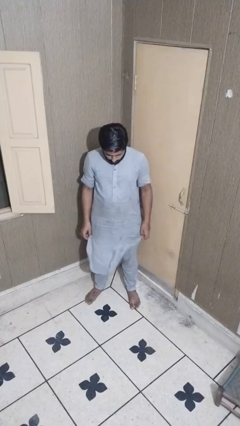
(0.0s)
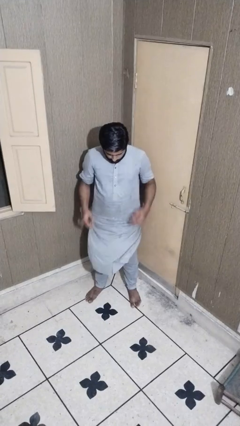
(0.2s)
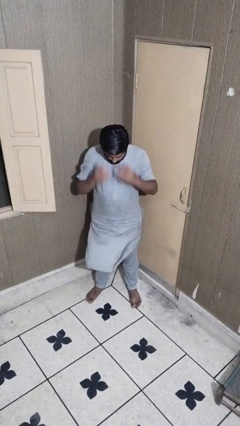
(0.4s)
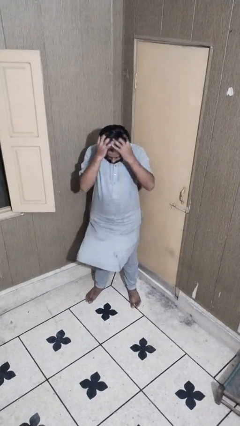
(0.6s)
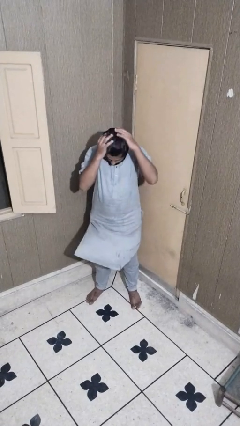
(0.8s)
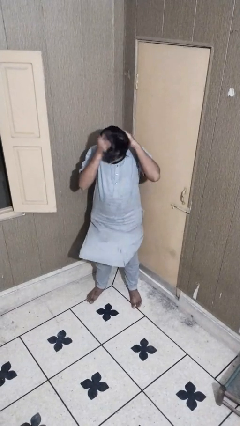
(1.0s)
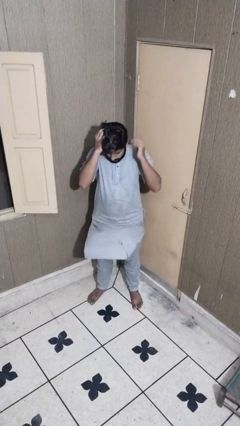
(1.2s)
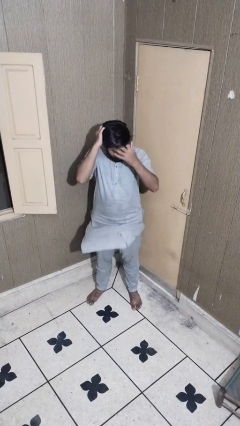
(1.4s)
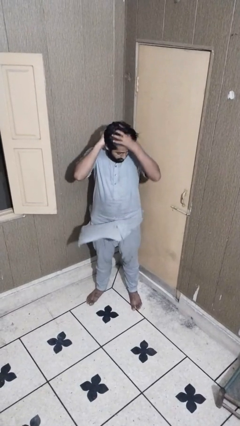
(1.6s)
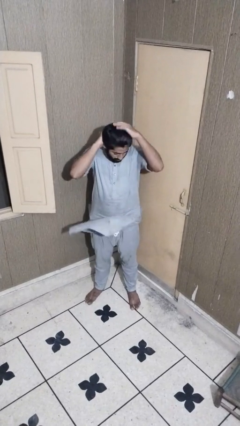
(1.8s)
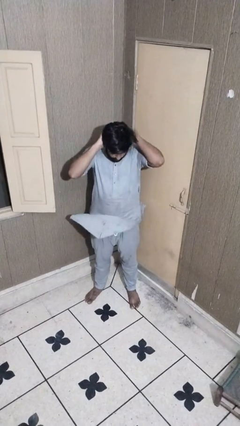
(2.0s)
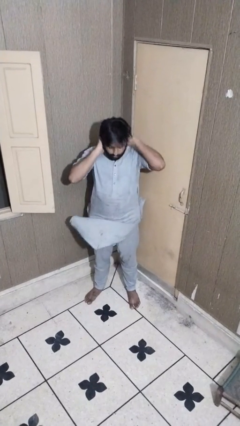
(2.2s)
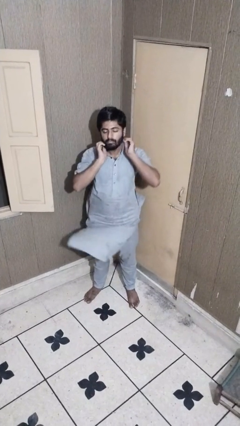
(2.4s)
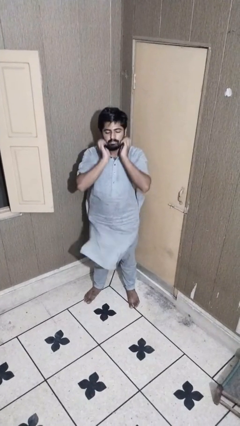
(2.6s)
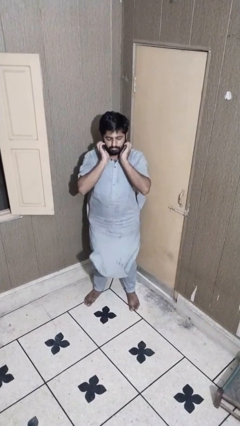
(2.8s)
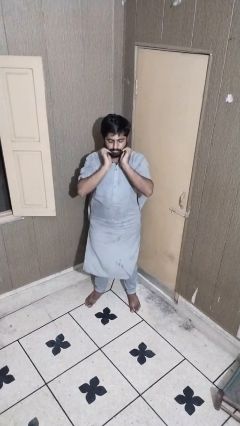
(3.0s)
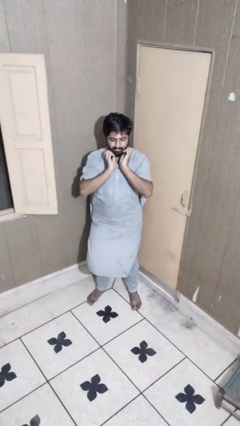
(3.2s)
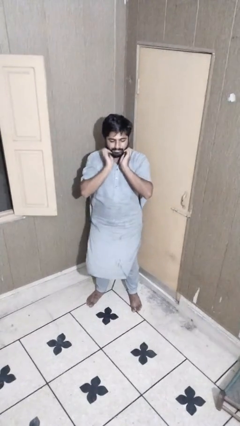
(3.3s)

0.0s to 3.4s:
person scratches face

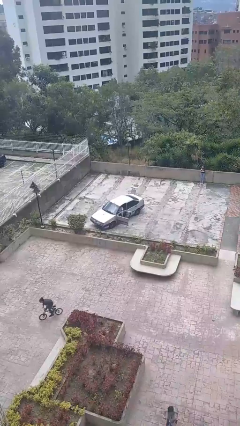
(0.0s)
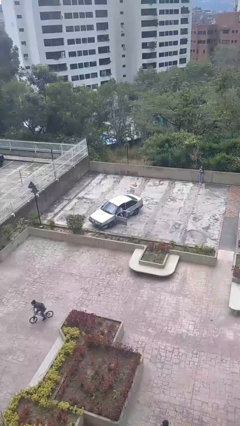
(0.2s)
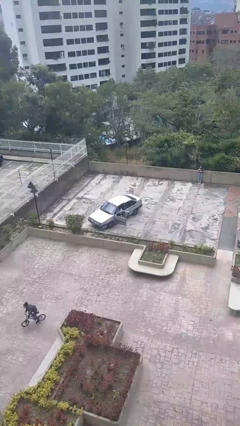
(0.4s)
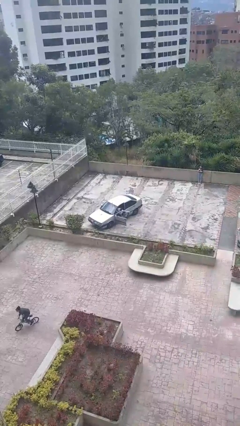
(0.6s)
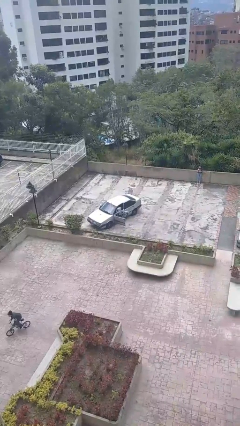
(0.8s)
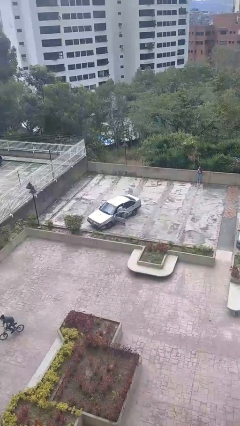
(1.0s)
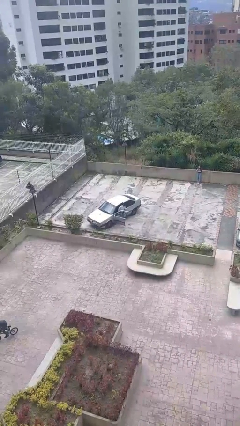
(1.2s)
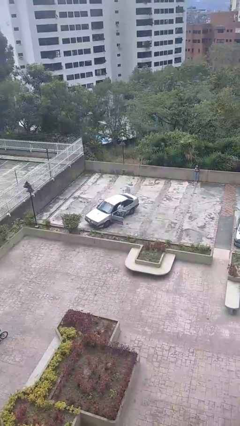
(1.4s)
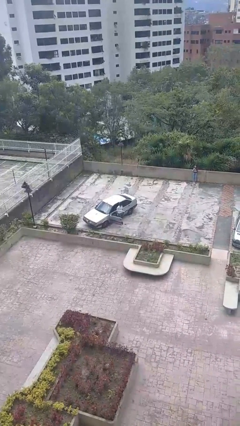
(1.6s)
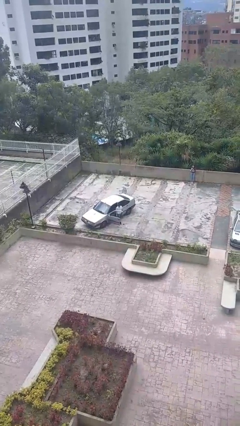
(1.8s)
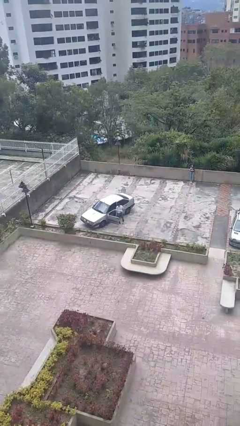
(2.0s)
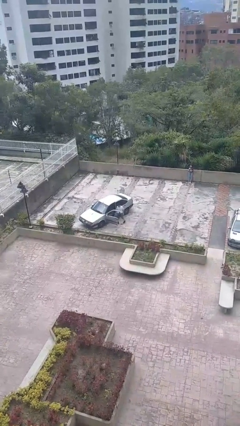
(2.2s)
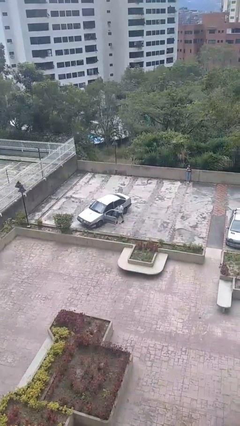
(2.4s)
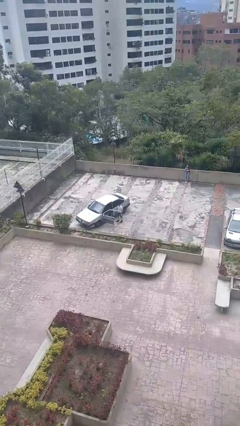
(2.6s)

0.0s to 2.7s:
person exits car

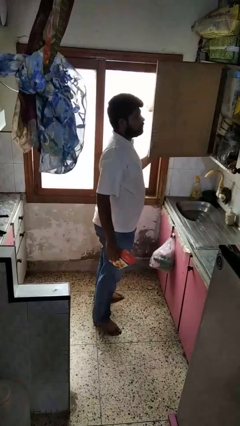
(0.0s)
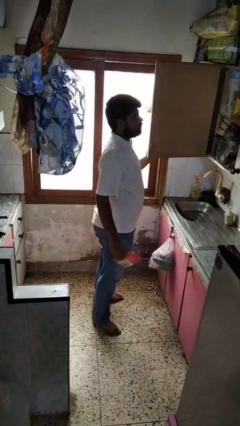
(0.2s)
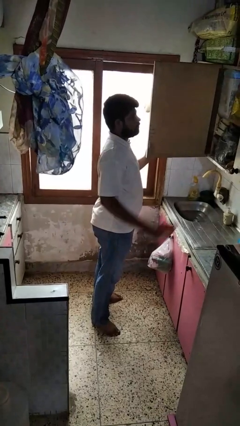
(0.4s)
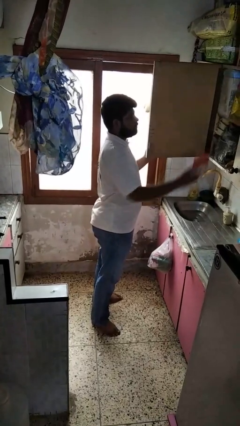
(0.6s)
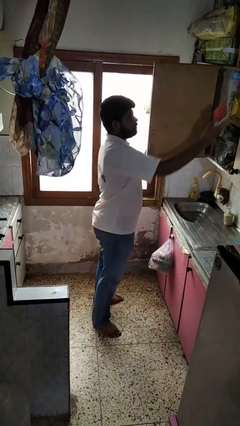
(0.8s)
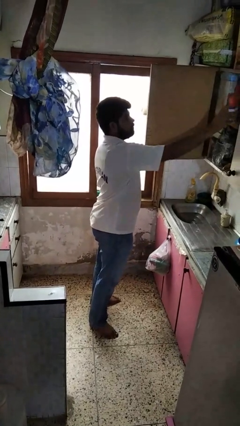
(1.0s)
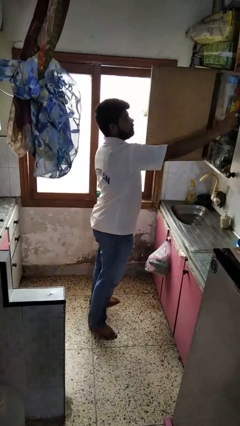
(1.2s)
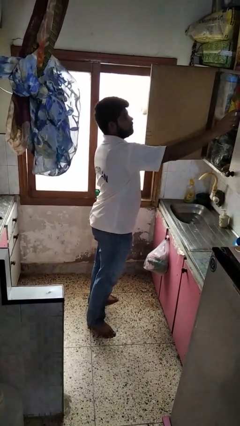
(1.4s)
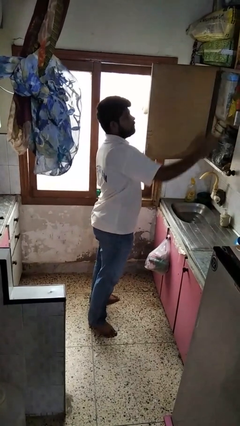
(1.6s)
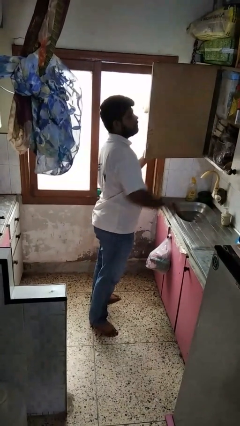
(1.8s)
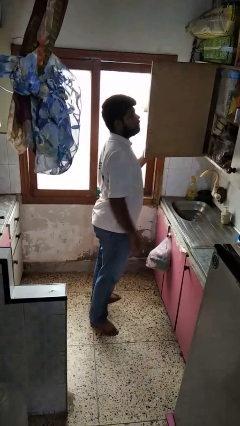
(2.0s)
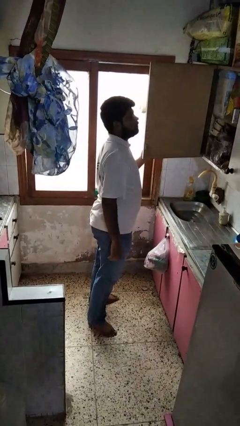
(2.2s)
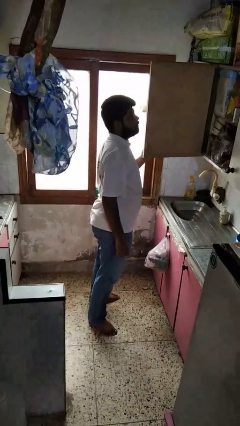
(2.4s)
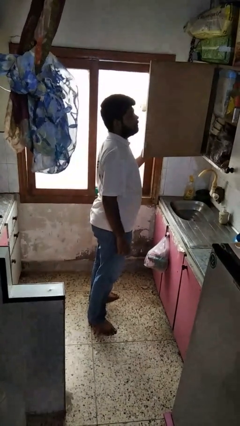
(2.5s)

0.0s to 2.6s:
person puts down object into cabinet

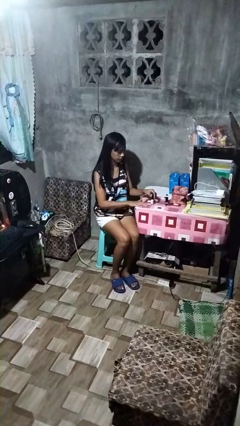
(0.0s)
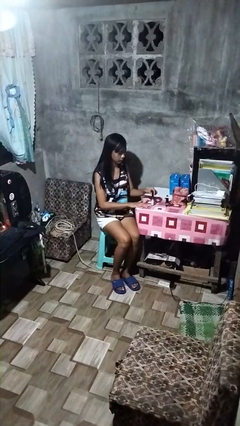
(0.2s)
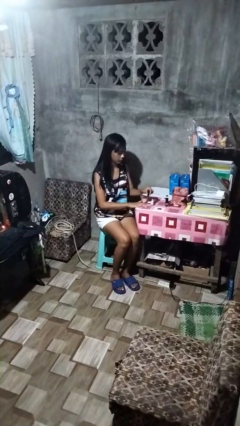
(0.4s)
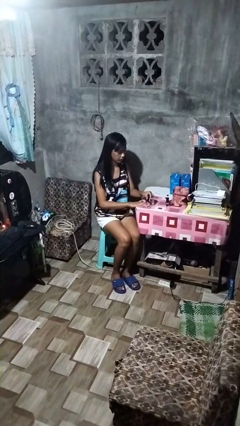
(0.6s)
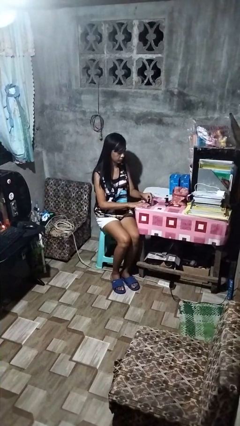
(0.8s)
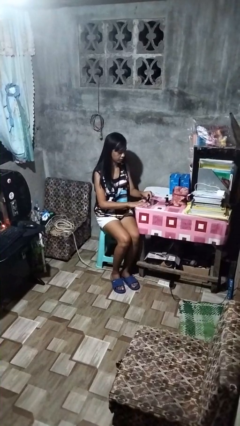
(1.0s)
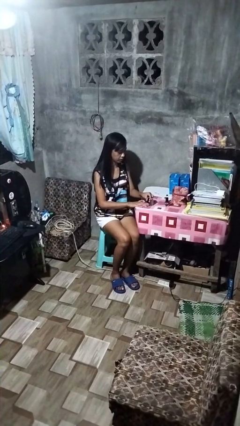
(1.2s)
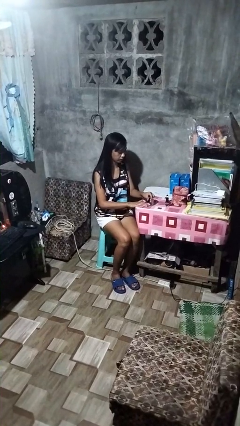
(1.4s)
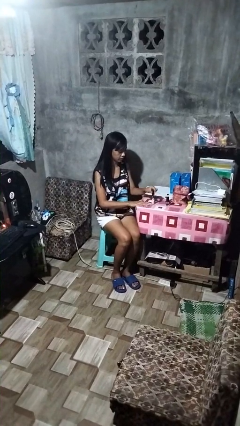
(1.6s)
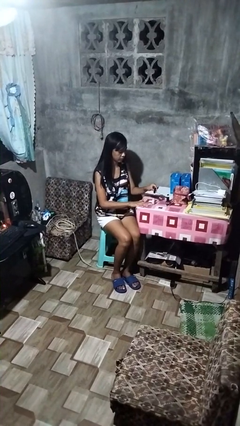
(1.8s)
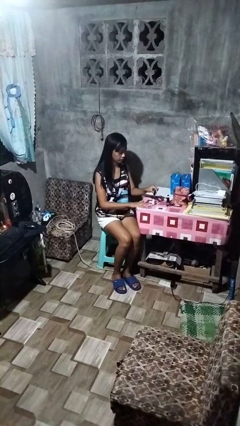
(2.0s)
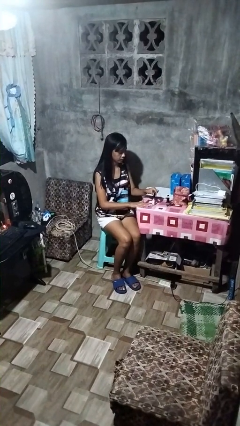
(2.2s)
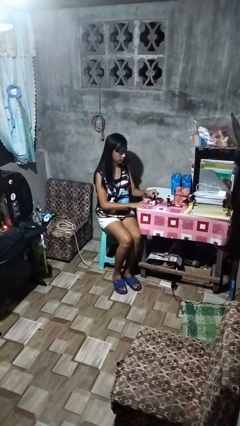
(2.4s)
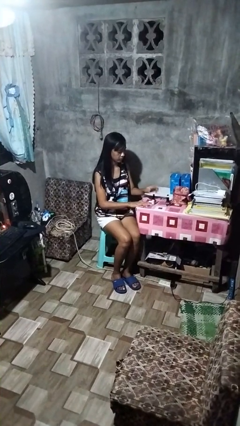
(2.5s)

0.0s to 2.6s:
person paints fingernails

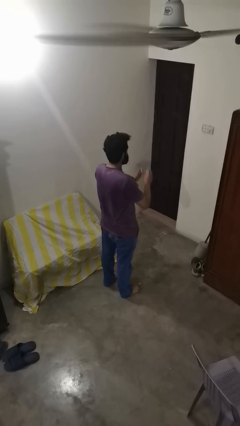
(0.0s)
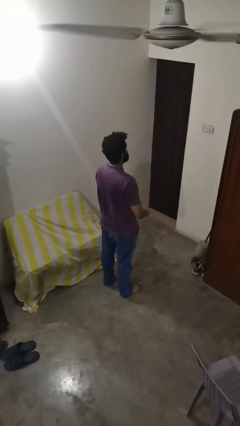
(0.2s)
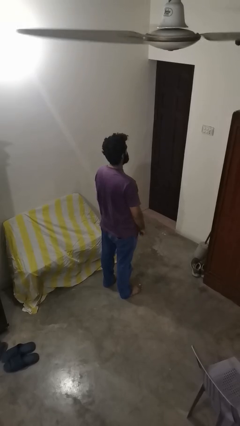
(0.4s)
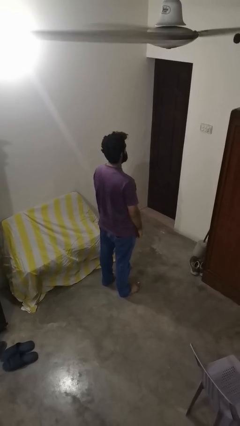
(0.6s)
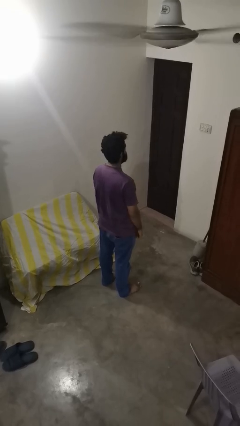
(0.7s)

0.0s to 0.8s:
person takes off glasses

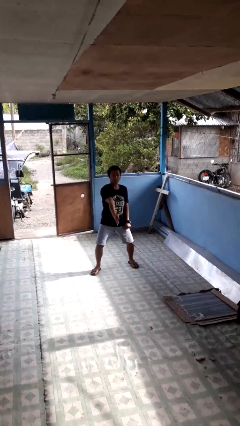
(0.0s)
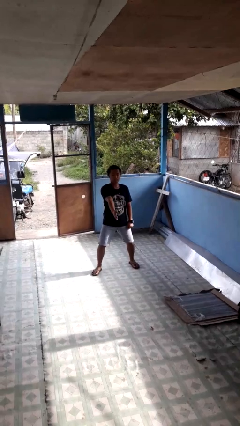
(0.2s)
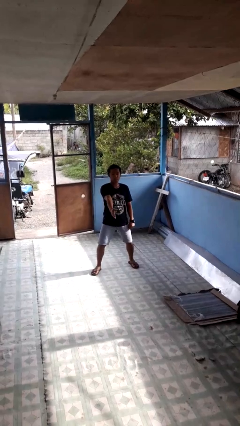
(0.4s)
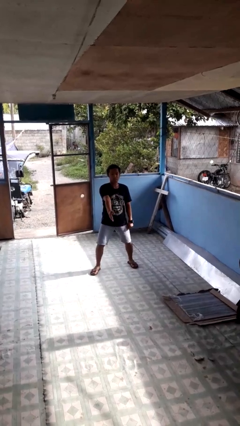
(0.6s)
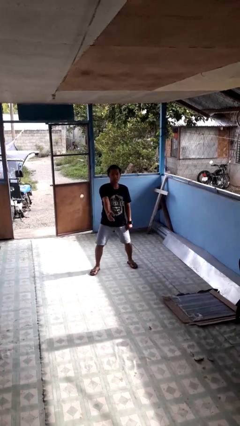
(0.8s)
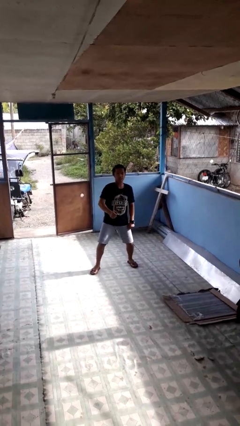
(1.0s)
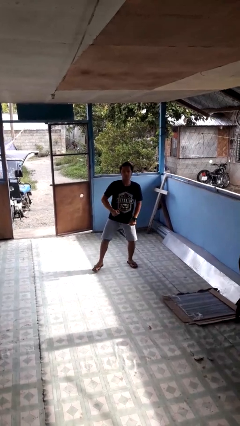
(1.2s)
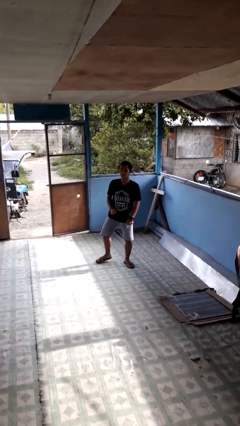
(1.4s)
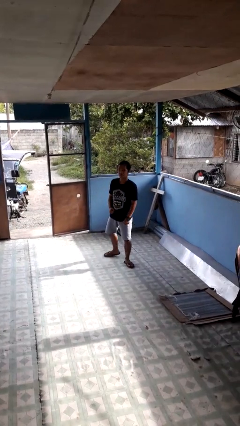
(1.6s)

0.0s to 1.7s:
person karate chop

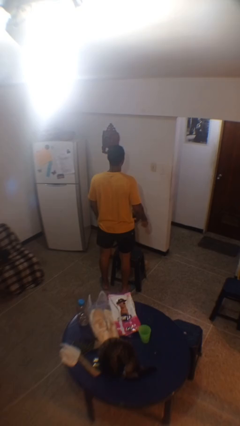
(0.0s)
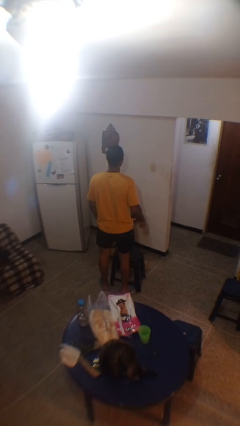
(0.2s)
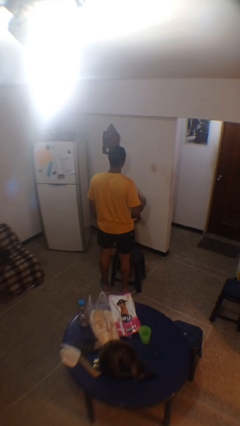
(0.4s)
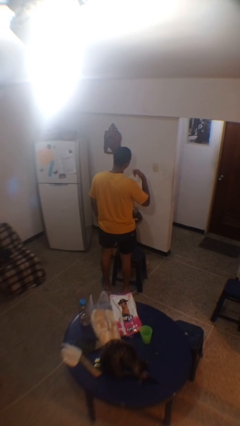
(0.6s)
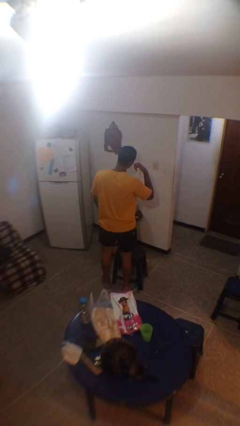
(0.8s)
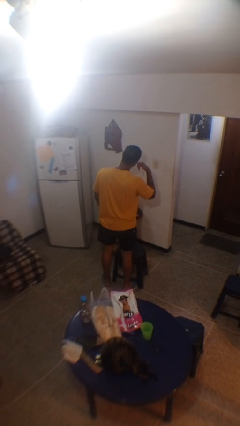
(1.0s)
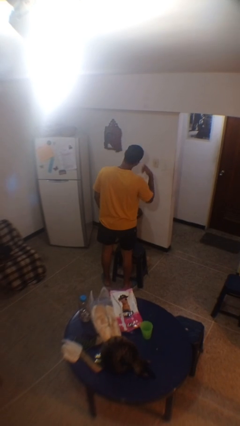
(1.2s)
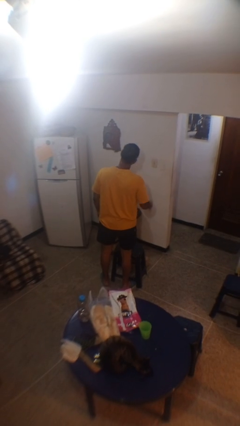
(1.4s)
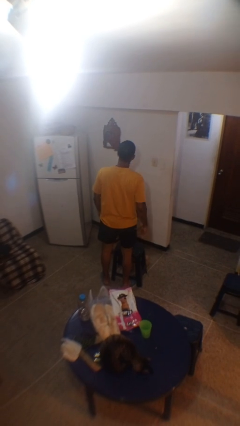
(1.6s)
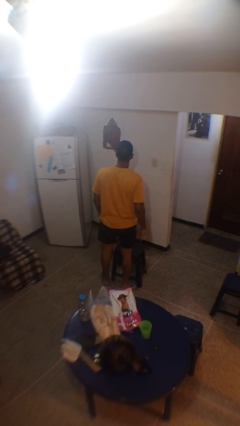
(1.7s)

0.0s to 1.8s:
person gestures call me

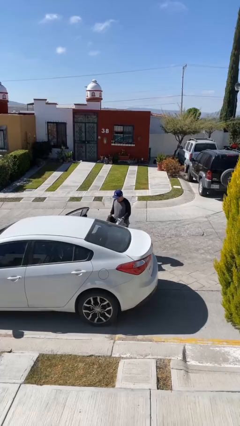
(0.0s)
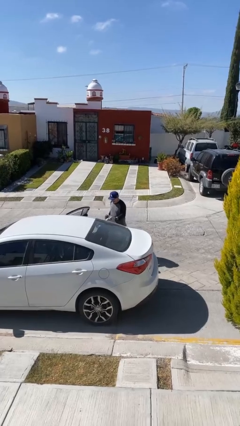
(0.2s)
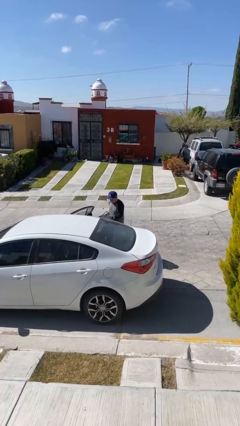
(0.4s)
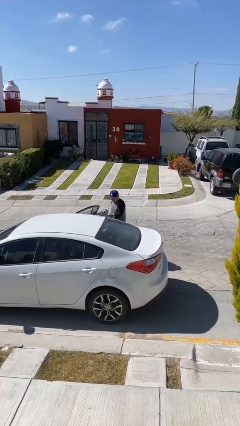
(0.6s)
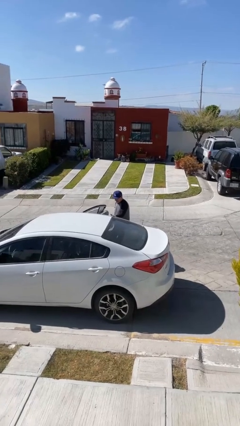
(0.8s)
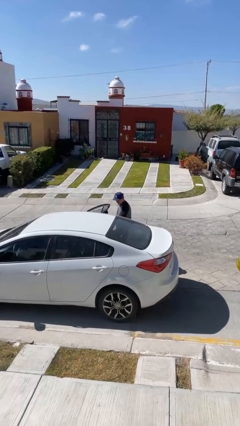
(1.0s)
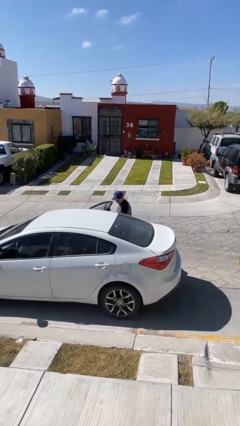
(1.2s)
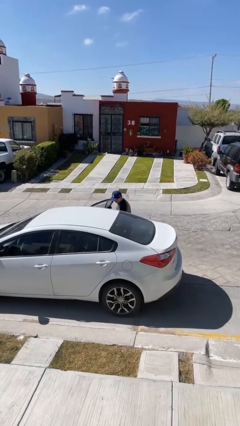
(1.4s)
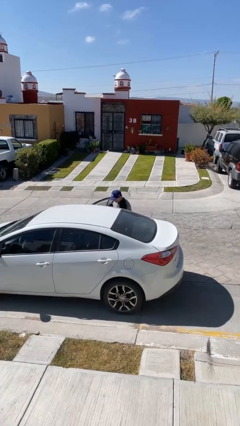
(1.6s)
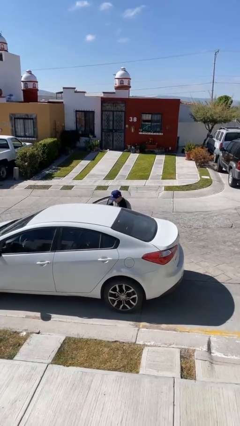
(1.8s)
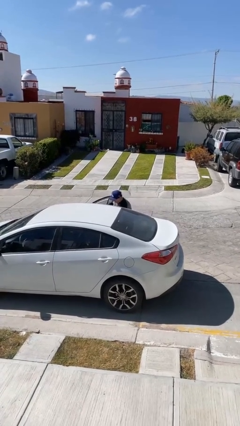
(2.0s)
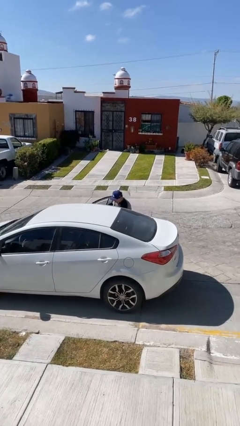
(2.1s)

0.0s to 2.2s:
person loads car
